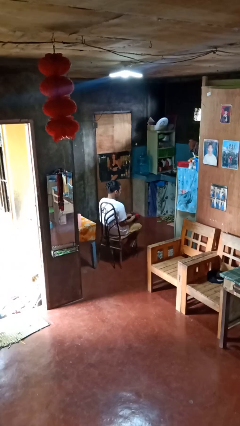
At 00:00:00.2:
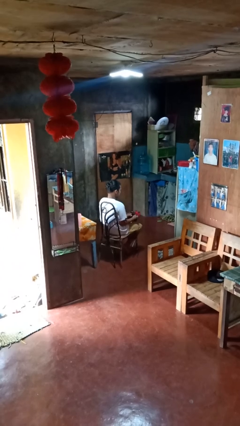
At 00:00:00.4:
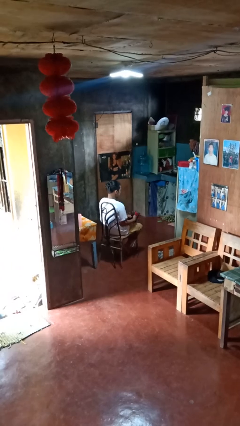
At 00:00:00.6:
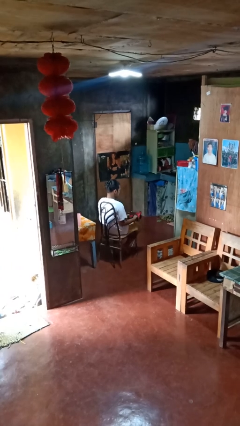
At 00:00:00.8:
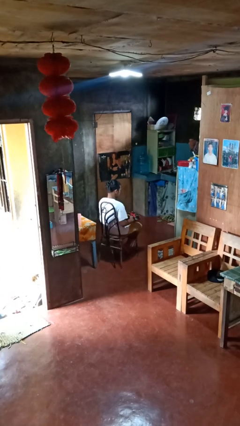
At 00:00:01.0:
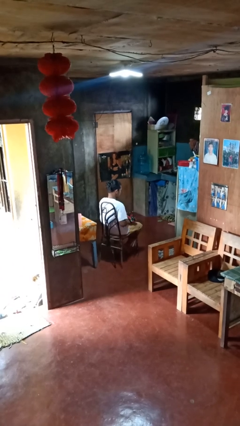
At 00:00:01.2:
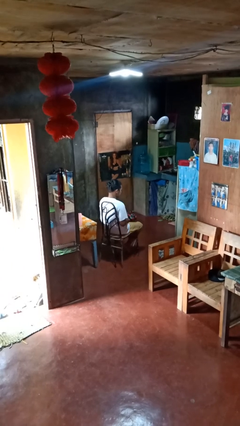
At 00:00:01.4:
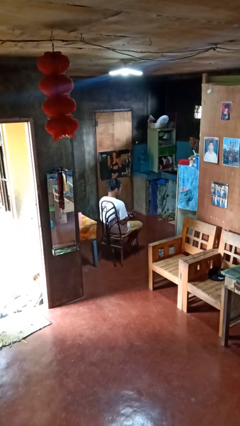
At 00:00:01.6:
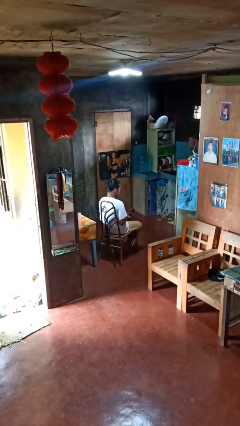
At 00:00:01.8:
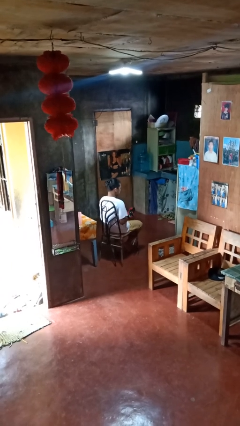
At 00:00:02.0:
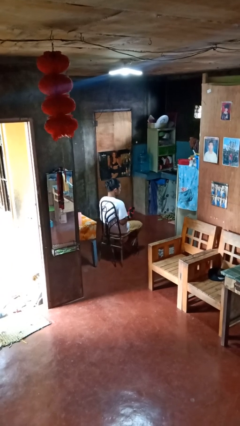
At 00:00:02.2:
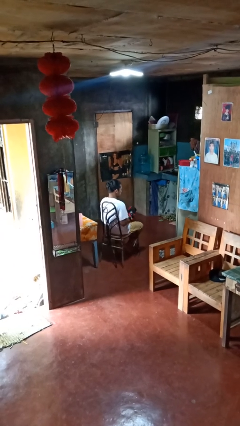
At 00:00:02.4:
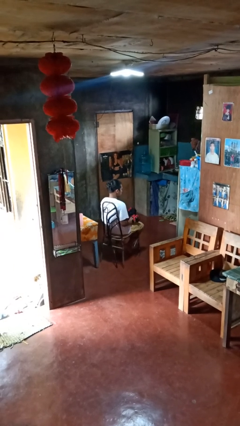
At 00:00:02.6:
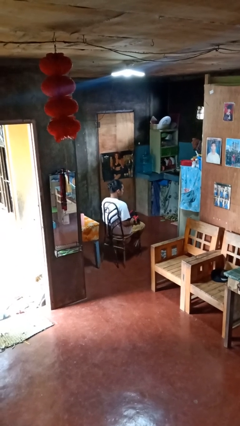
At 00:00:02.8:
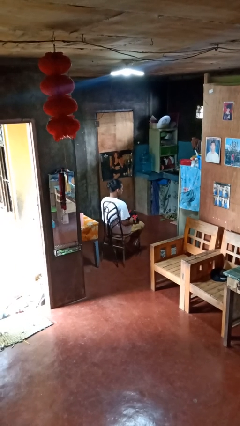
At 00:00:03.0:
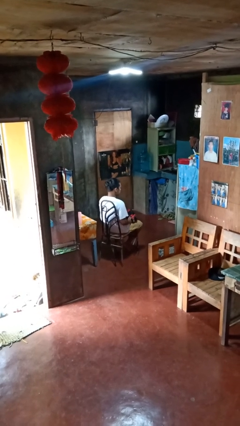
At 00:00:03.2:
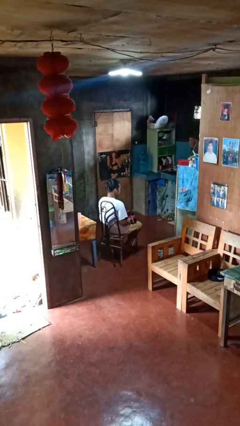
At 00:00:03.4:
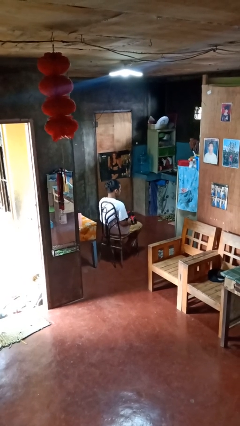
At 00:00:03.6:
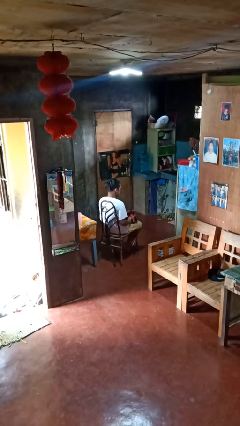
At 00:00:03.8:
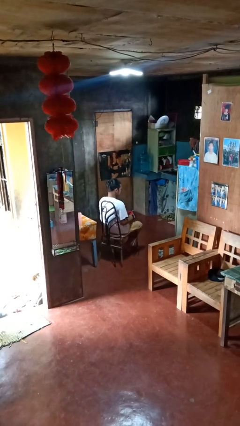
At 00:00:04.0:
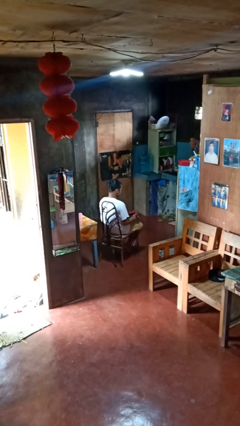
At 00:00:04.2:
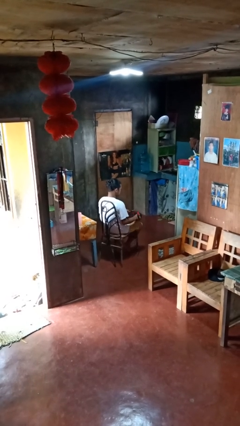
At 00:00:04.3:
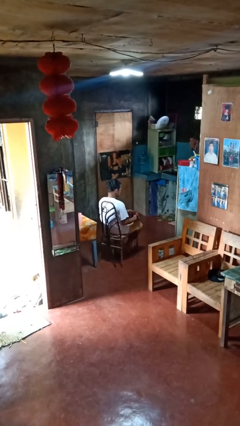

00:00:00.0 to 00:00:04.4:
person puts on gloves

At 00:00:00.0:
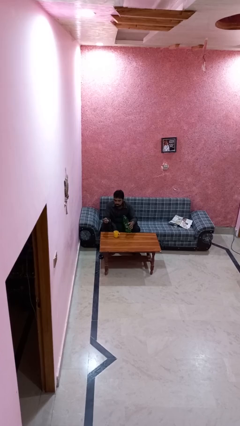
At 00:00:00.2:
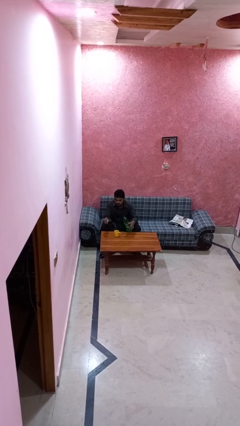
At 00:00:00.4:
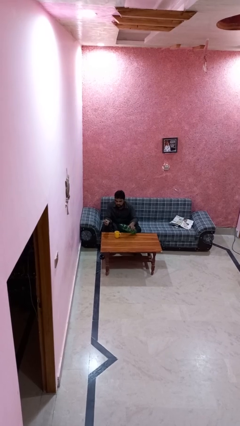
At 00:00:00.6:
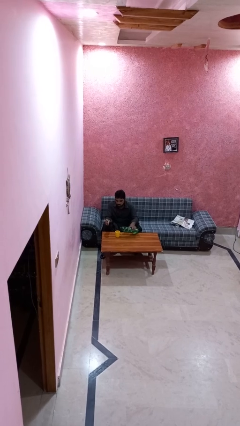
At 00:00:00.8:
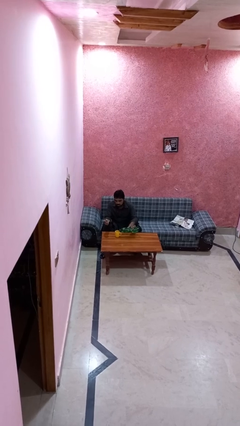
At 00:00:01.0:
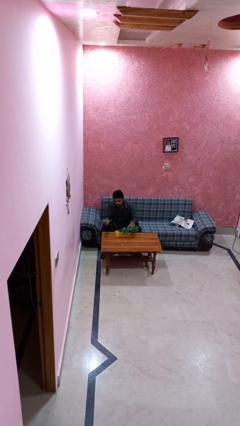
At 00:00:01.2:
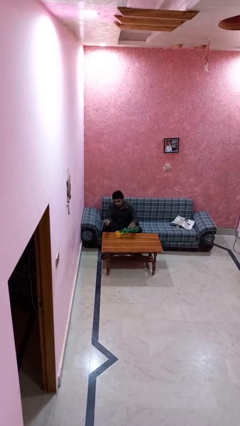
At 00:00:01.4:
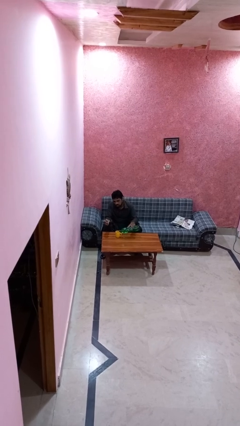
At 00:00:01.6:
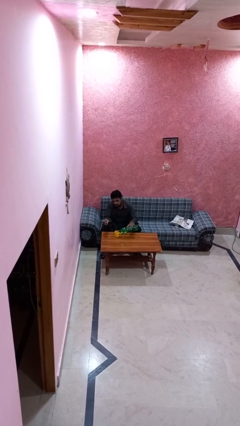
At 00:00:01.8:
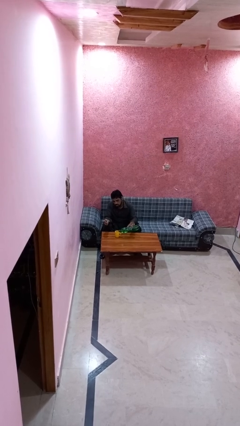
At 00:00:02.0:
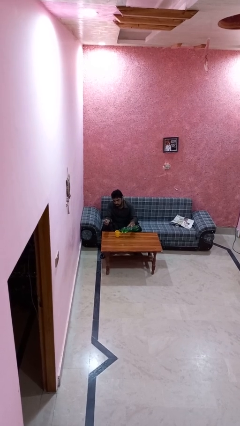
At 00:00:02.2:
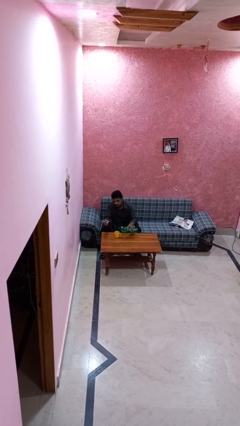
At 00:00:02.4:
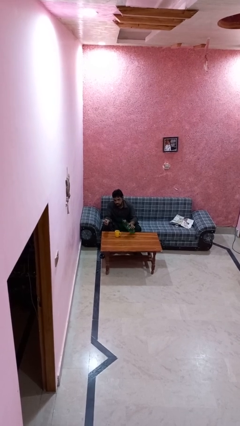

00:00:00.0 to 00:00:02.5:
person pours liquid into cup

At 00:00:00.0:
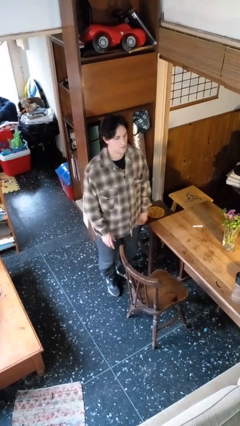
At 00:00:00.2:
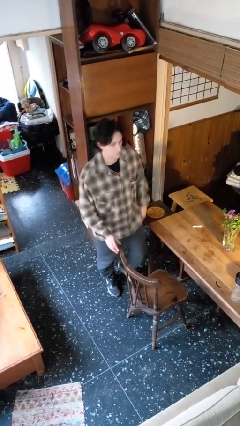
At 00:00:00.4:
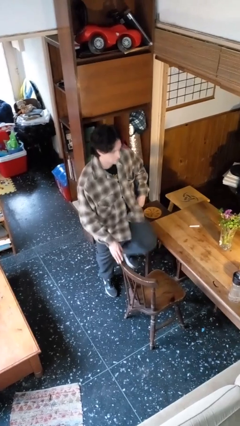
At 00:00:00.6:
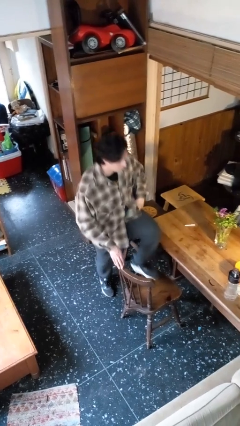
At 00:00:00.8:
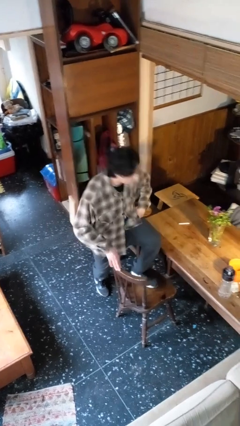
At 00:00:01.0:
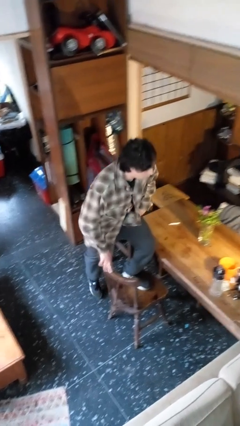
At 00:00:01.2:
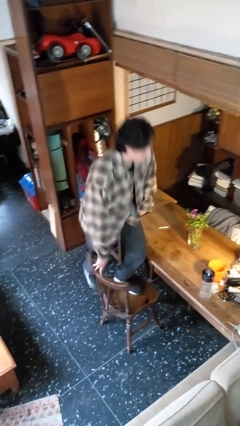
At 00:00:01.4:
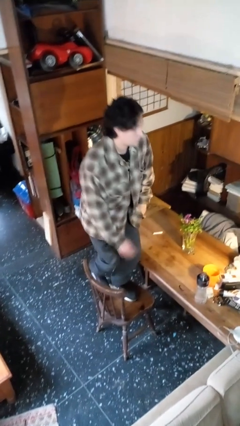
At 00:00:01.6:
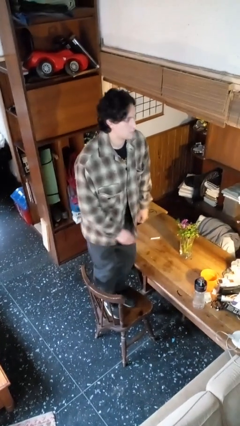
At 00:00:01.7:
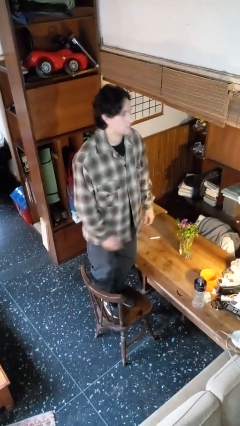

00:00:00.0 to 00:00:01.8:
person climbs on chair

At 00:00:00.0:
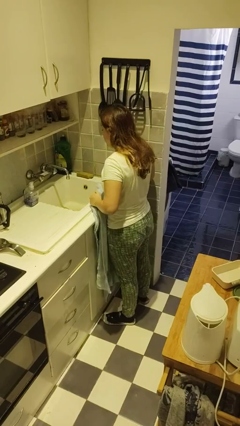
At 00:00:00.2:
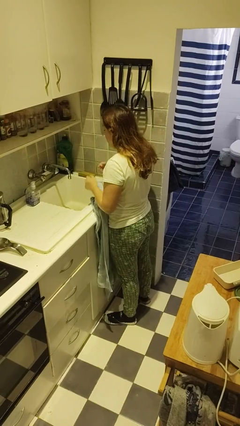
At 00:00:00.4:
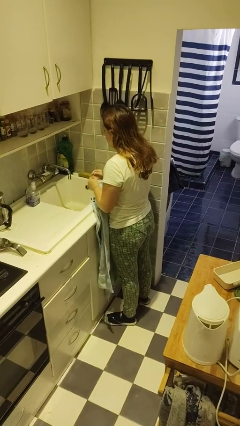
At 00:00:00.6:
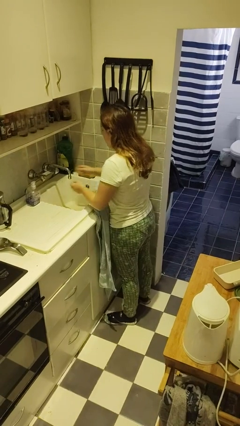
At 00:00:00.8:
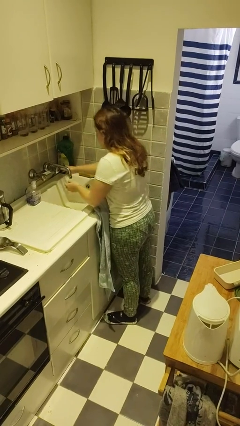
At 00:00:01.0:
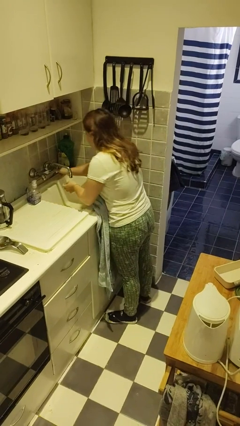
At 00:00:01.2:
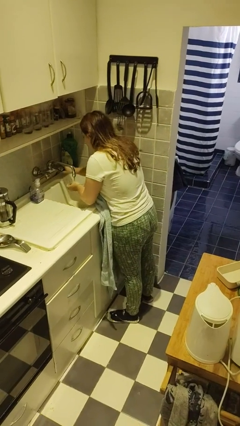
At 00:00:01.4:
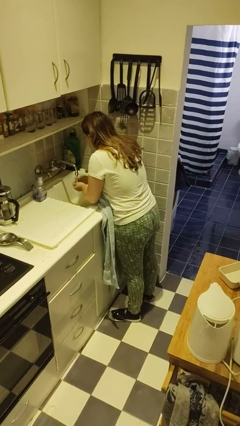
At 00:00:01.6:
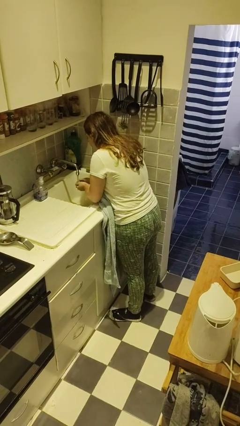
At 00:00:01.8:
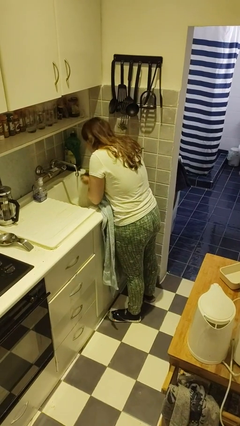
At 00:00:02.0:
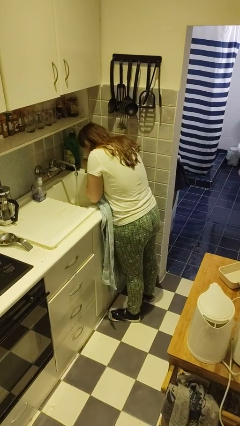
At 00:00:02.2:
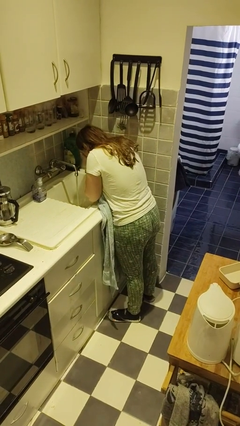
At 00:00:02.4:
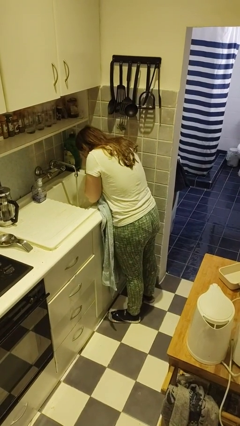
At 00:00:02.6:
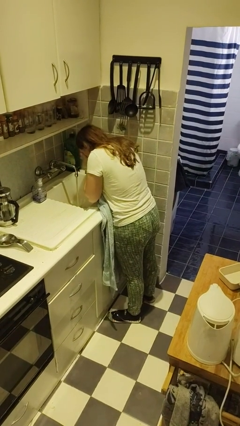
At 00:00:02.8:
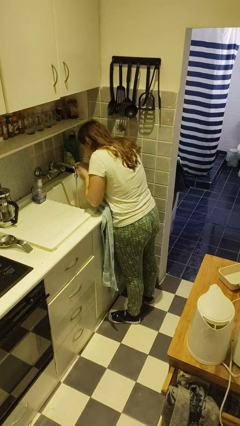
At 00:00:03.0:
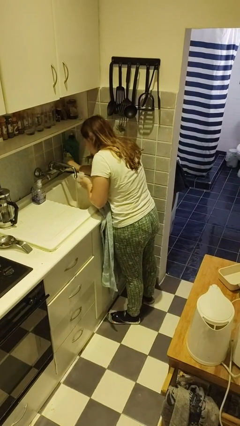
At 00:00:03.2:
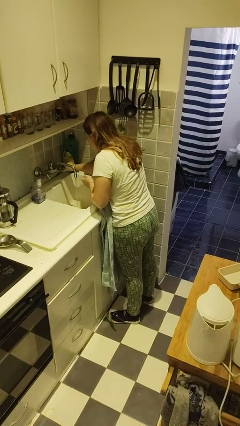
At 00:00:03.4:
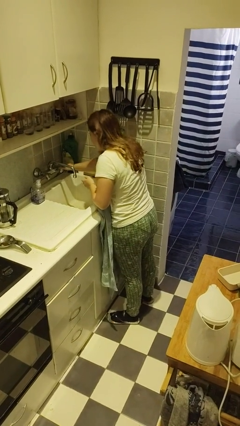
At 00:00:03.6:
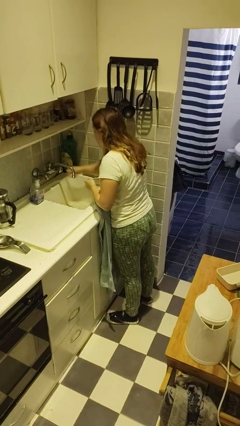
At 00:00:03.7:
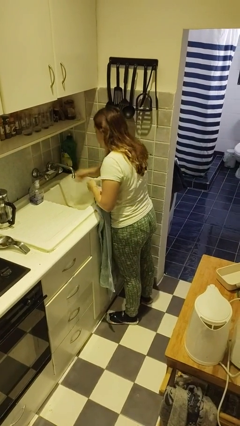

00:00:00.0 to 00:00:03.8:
person washes face

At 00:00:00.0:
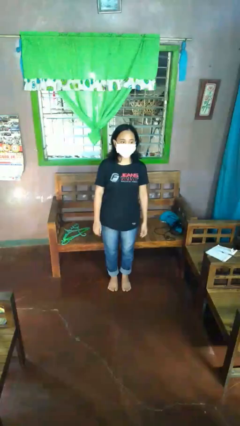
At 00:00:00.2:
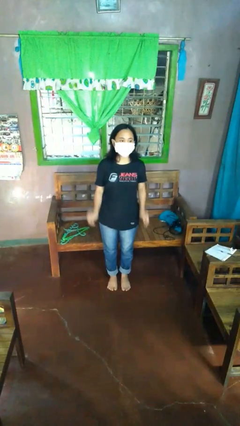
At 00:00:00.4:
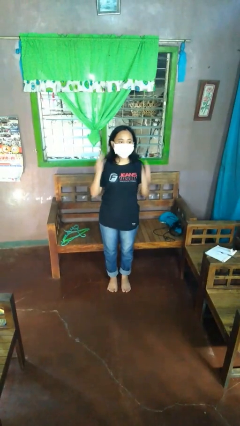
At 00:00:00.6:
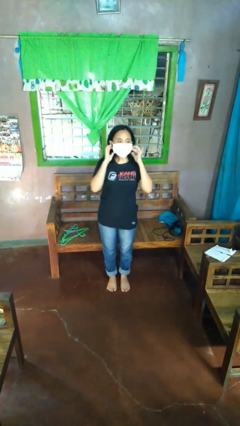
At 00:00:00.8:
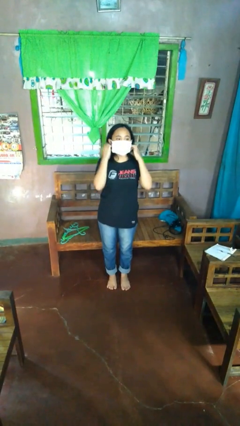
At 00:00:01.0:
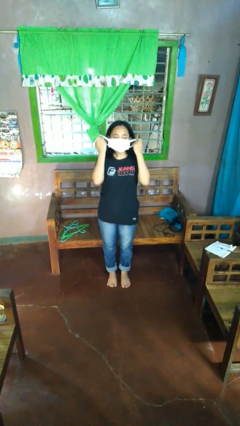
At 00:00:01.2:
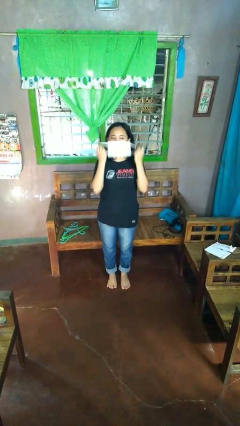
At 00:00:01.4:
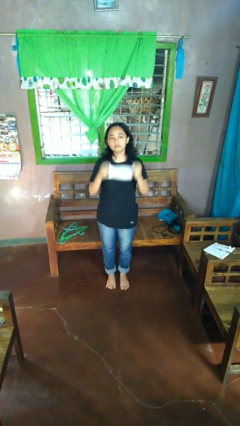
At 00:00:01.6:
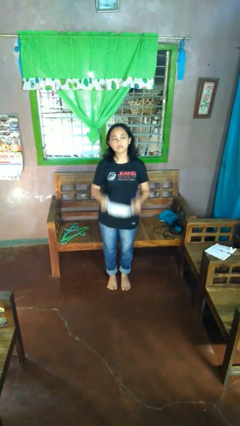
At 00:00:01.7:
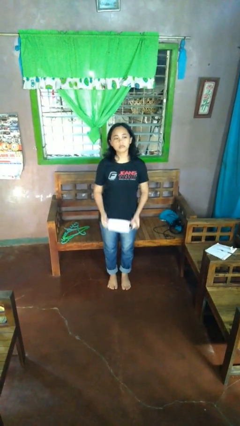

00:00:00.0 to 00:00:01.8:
person takes off facemask

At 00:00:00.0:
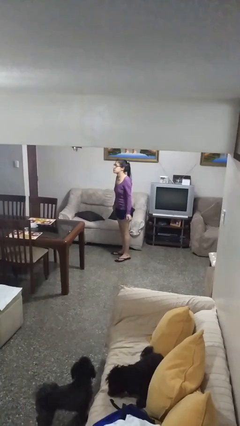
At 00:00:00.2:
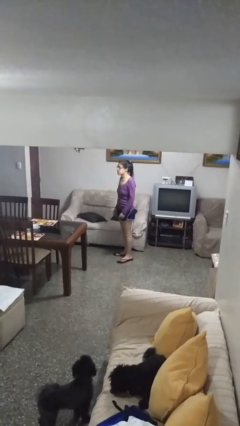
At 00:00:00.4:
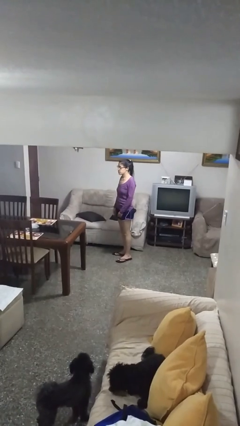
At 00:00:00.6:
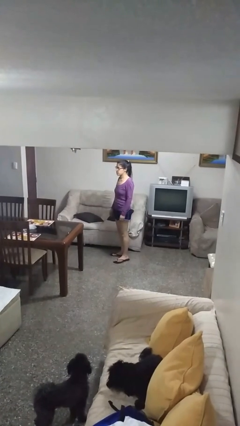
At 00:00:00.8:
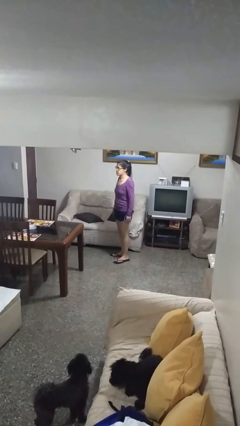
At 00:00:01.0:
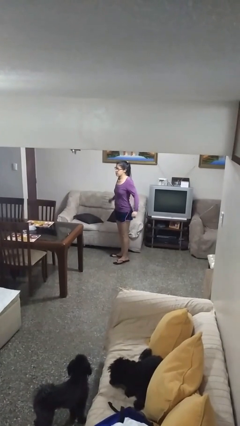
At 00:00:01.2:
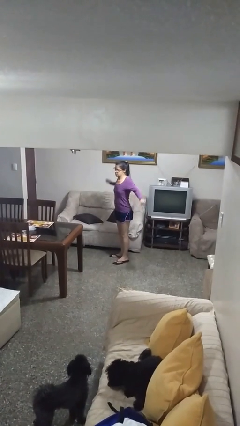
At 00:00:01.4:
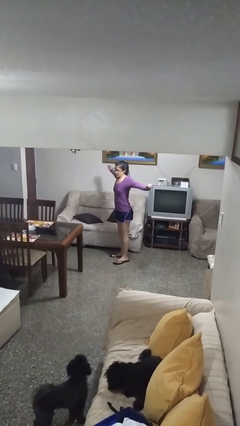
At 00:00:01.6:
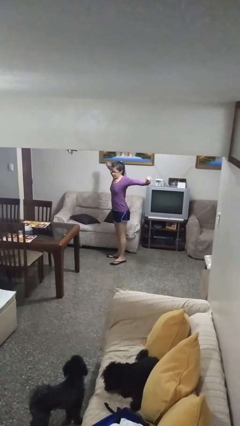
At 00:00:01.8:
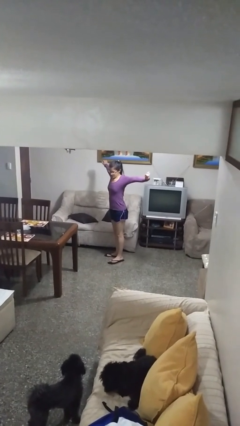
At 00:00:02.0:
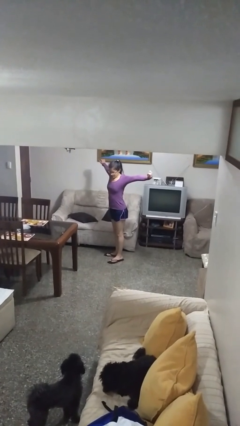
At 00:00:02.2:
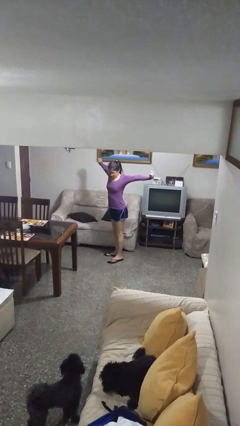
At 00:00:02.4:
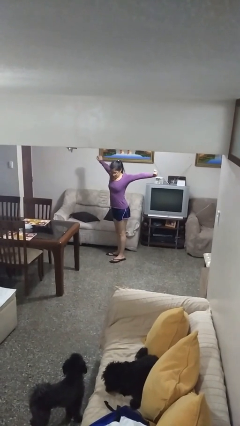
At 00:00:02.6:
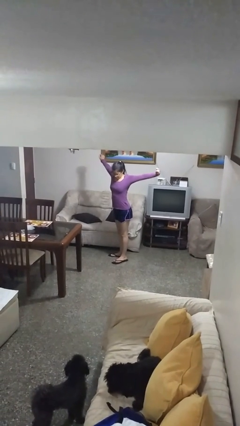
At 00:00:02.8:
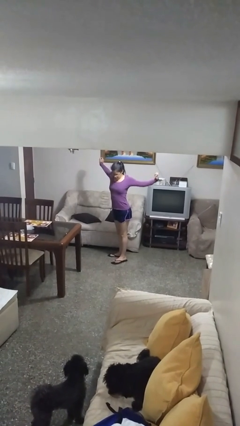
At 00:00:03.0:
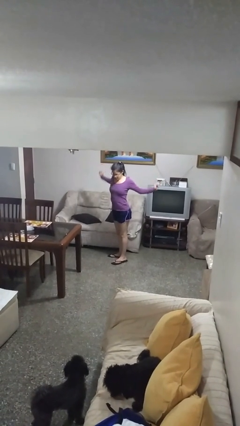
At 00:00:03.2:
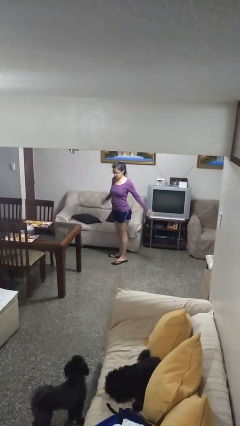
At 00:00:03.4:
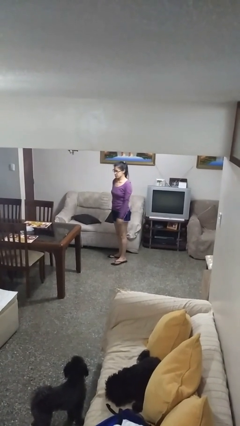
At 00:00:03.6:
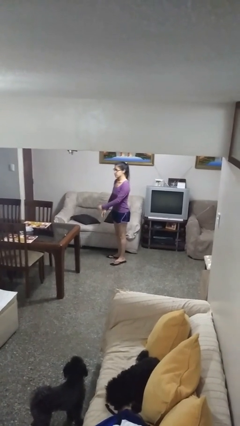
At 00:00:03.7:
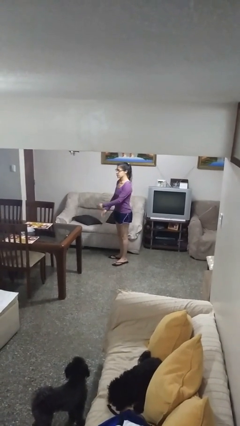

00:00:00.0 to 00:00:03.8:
person stretches arms to side
